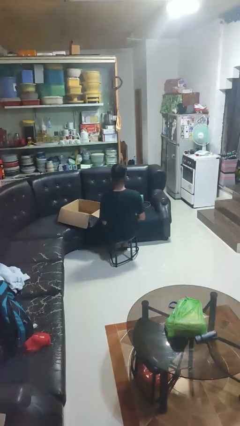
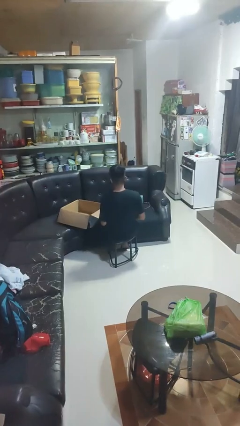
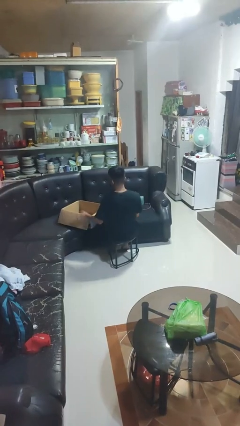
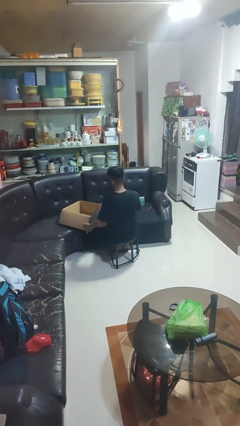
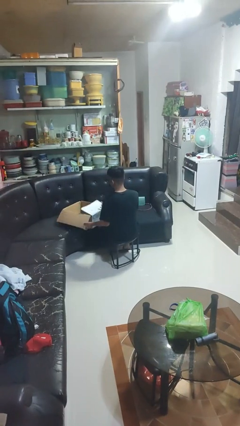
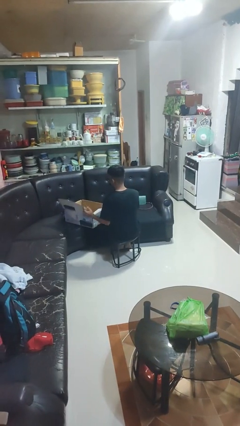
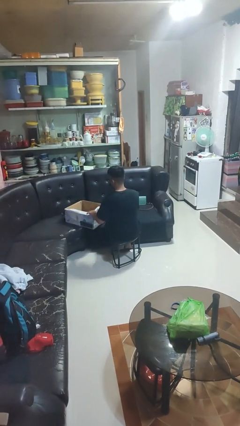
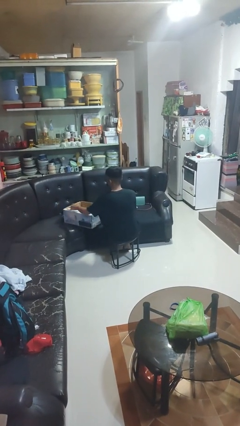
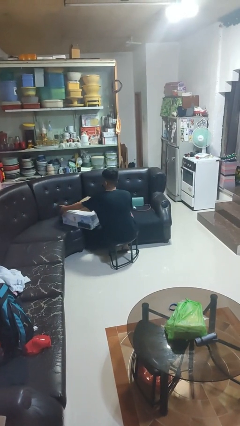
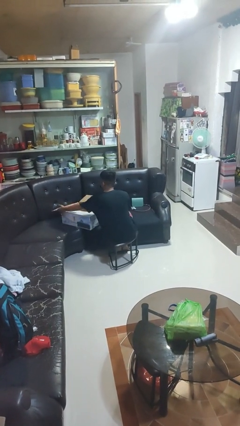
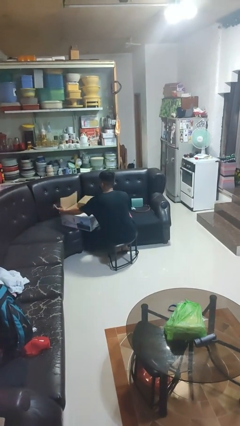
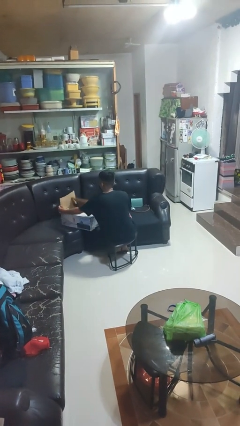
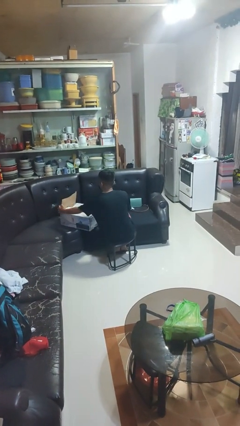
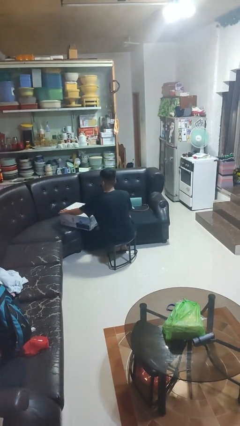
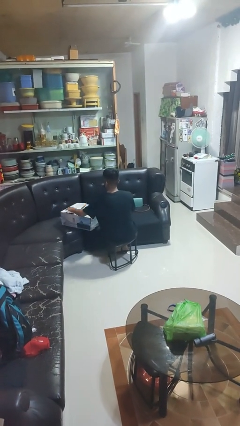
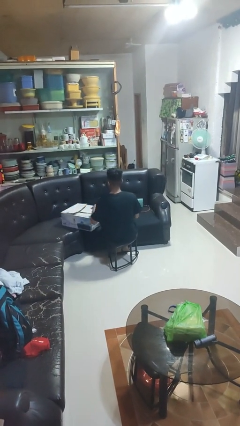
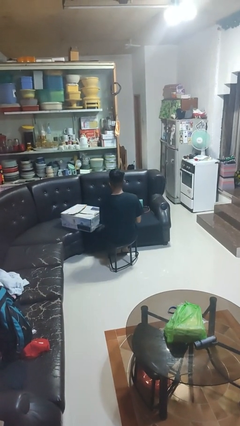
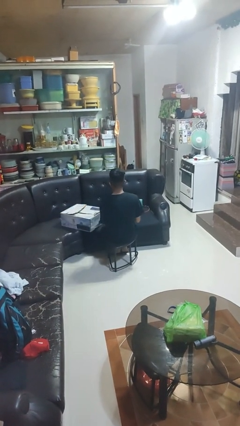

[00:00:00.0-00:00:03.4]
person closes box

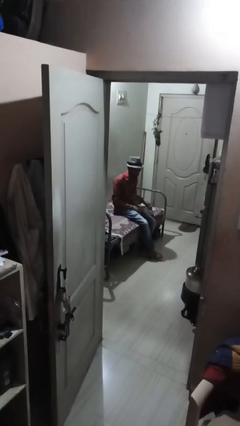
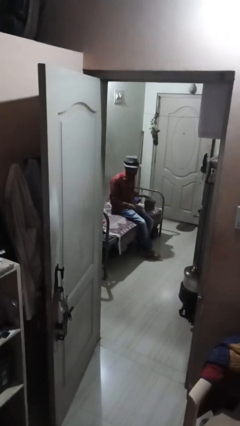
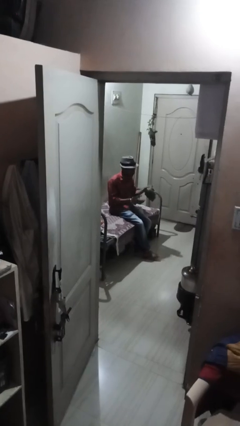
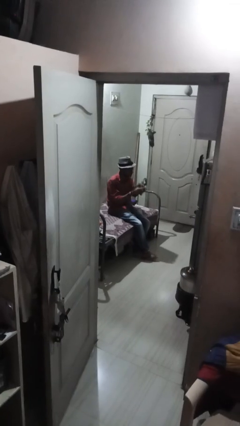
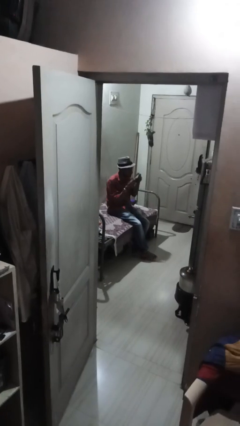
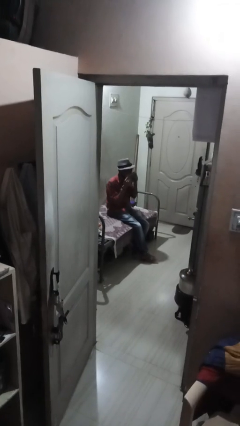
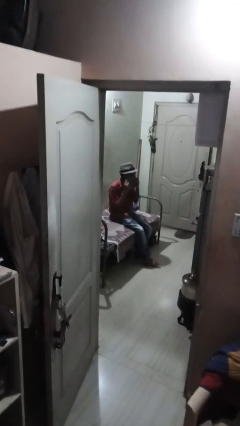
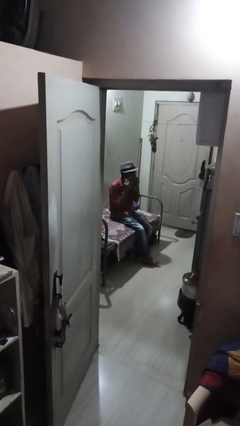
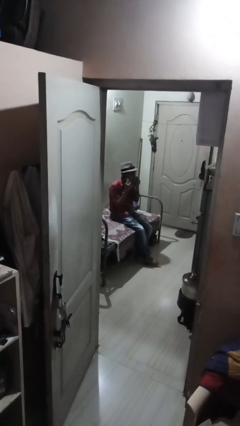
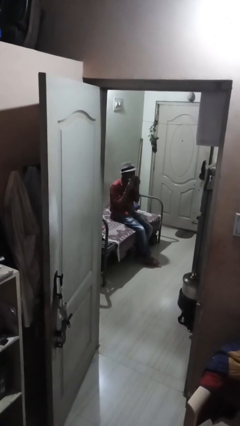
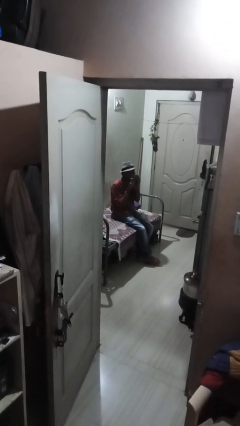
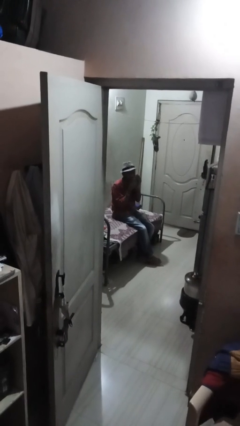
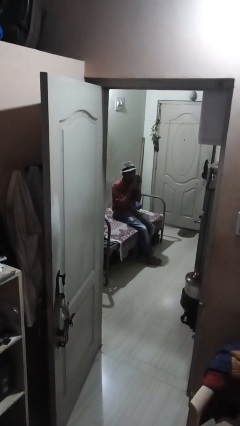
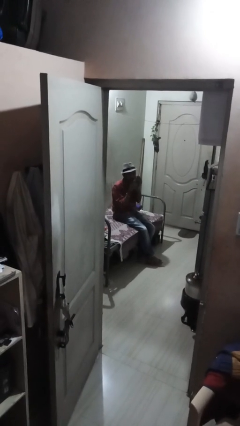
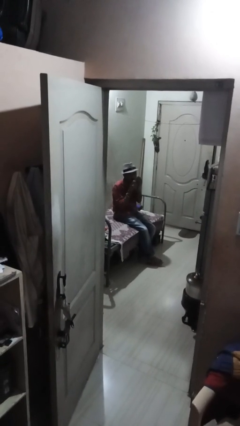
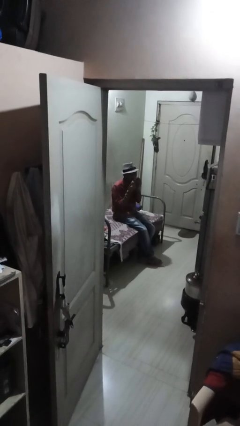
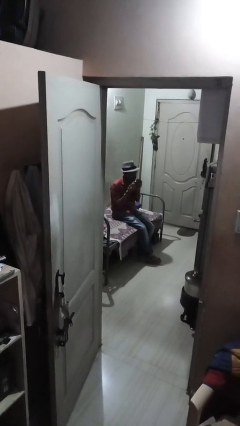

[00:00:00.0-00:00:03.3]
person wipes mouth with napkin

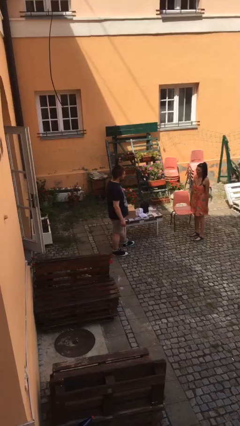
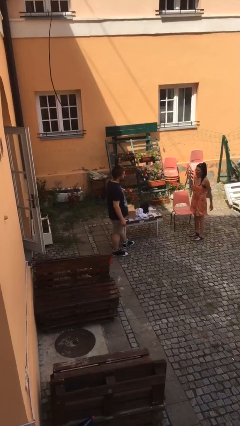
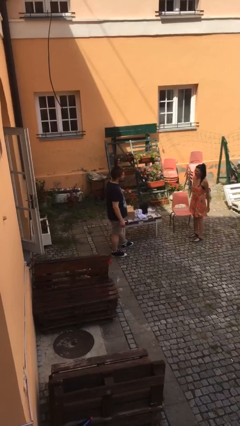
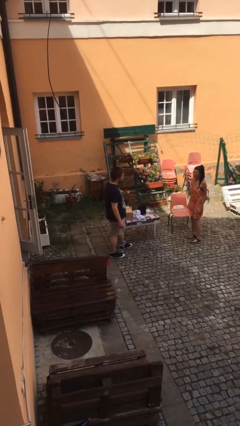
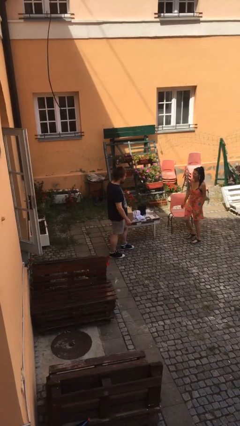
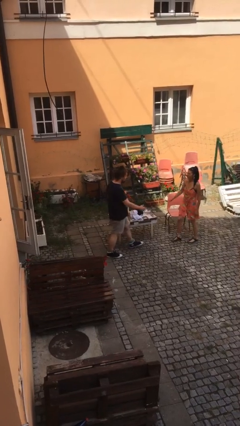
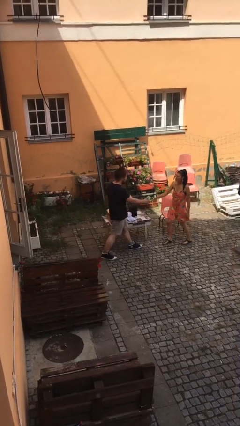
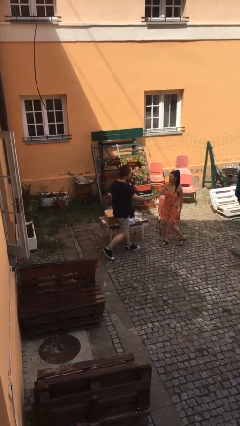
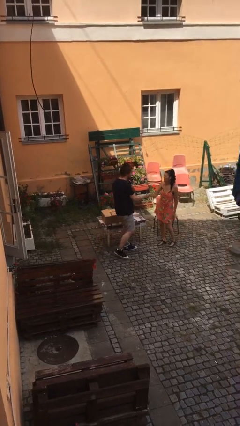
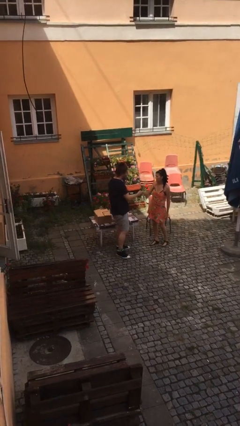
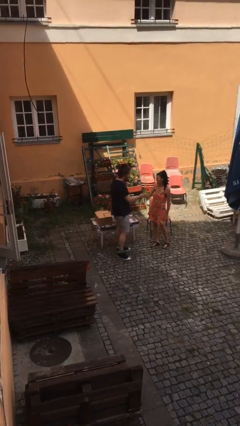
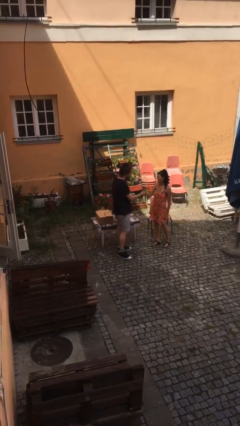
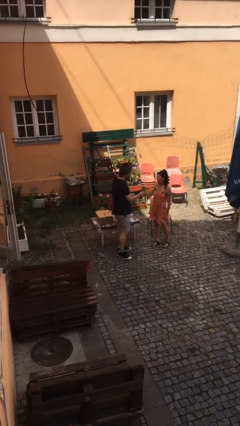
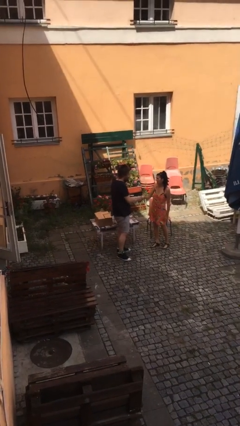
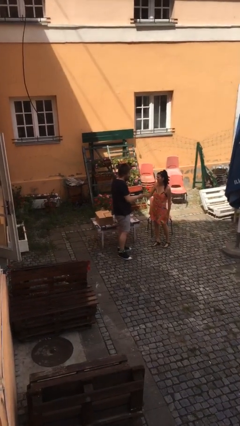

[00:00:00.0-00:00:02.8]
person shakes hand

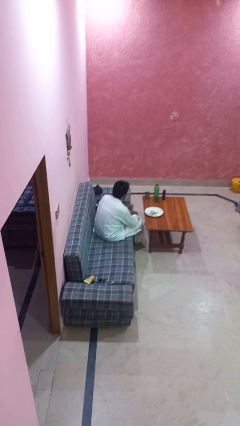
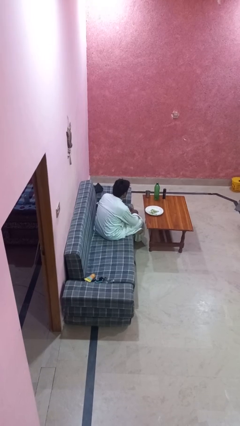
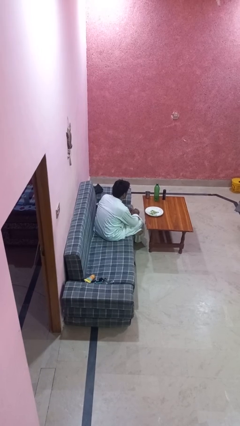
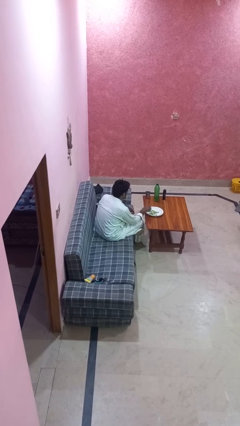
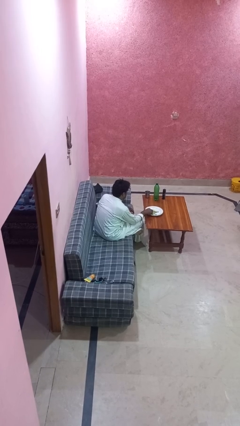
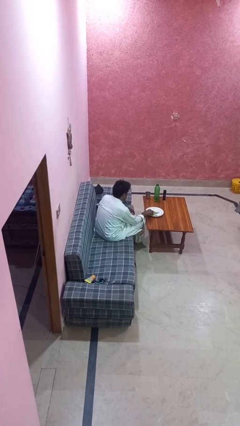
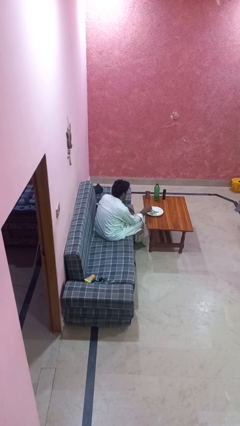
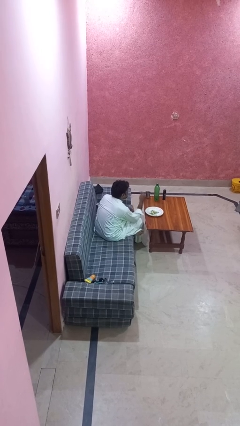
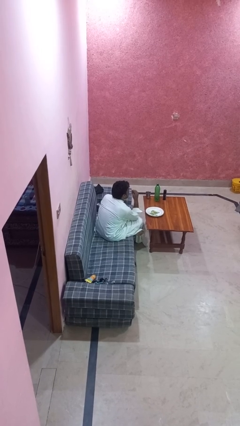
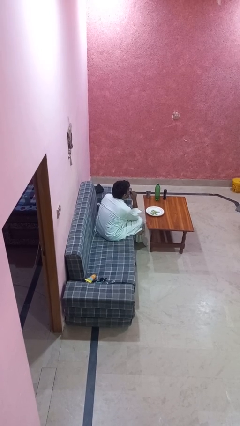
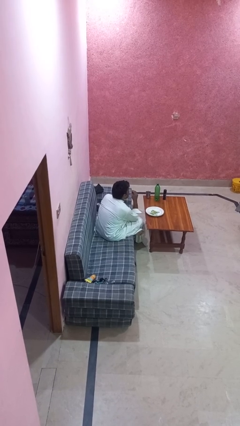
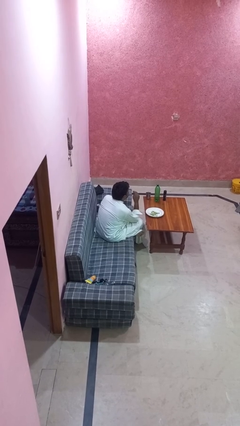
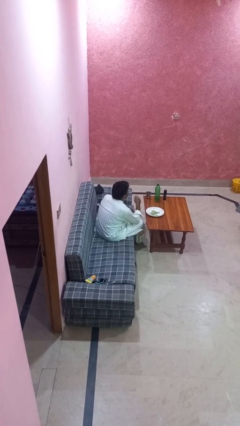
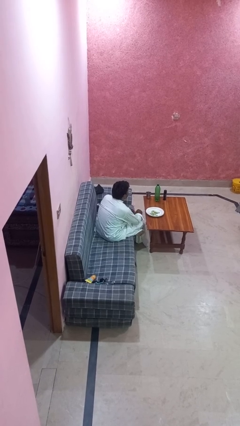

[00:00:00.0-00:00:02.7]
person eats with hands

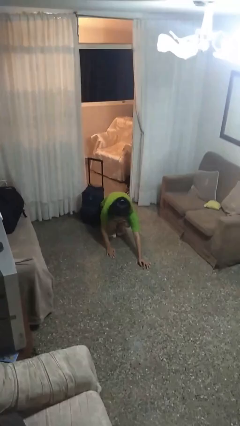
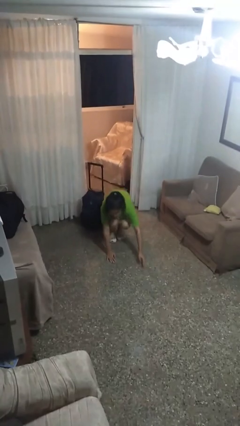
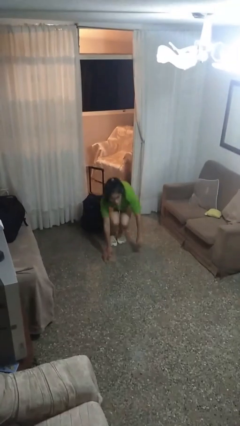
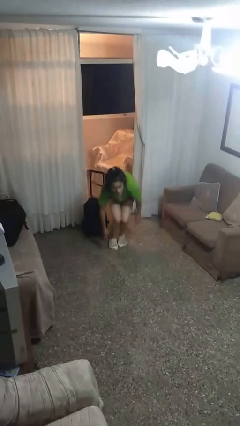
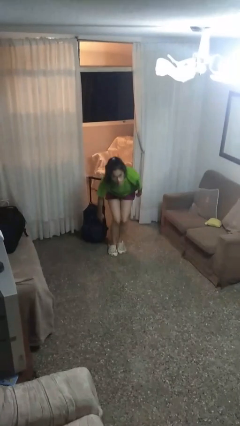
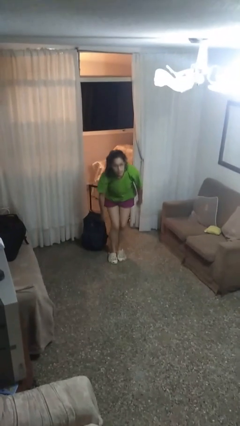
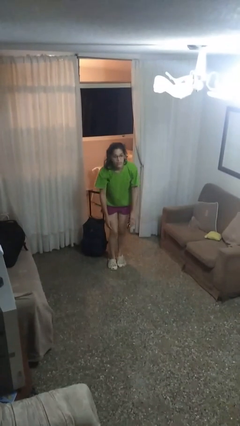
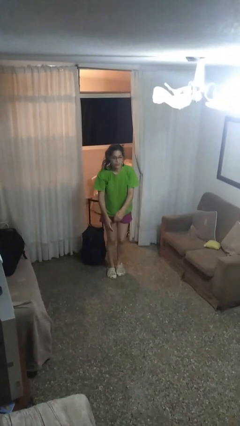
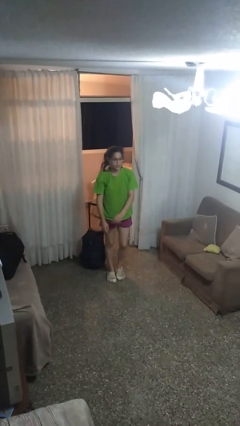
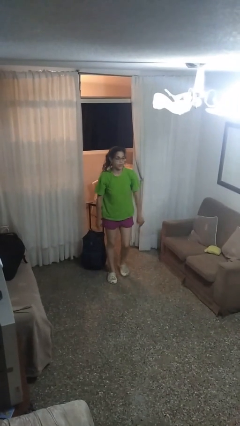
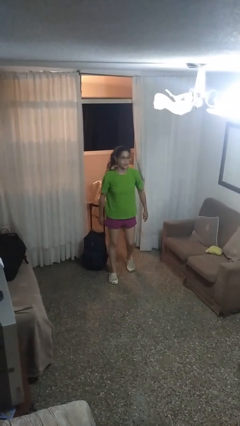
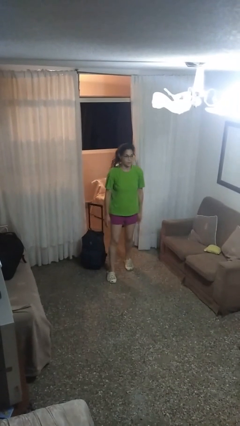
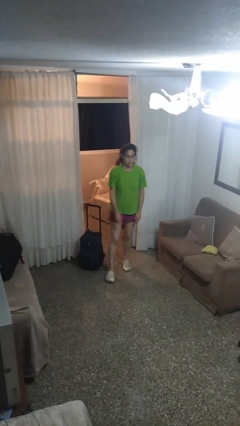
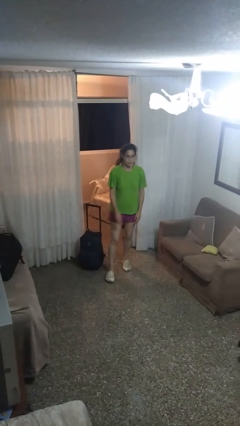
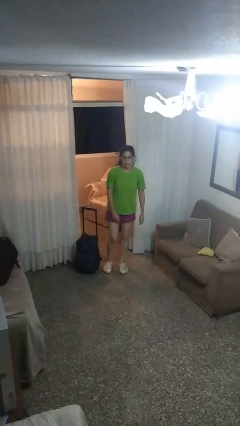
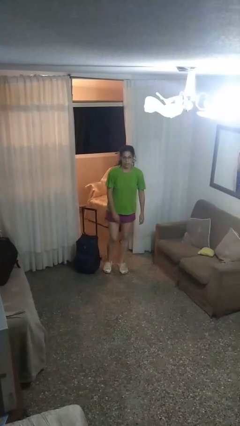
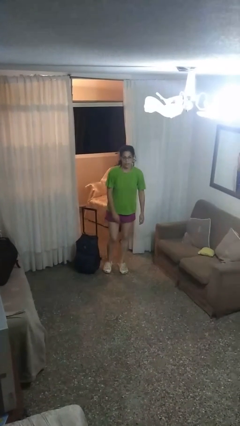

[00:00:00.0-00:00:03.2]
person stands up from floor

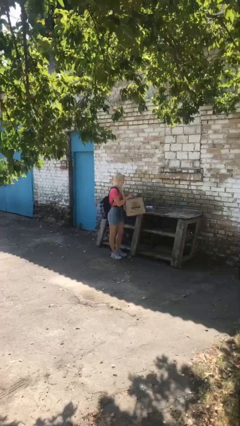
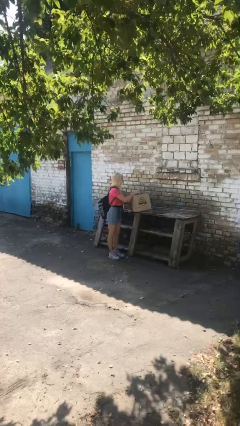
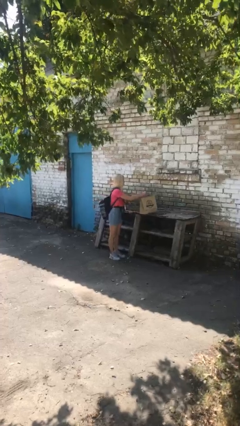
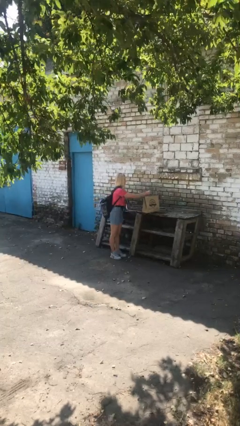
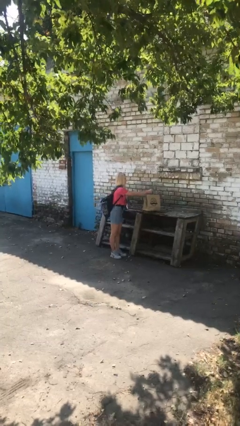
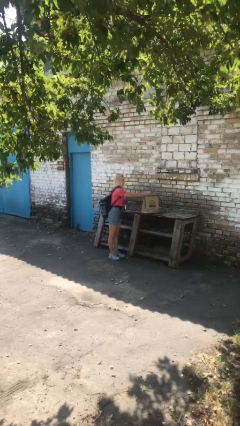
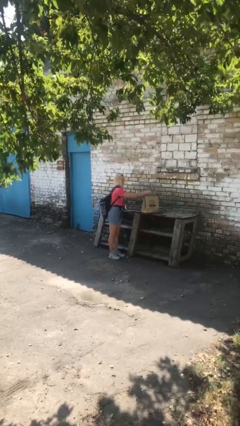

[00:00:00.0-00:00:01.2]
person puts down object on table

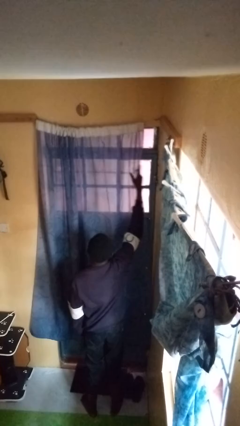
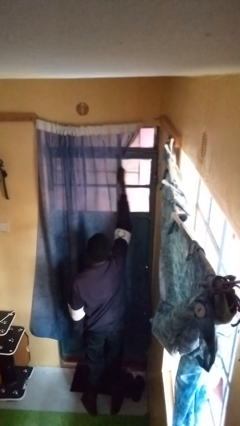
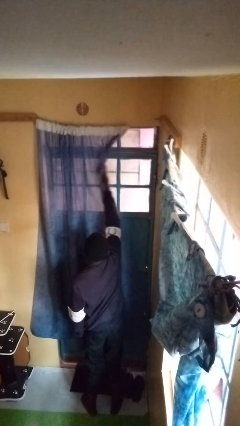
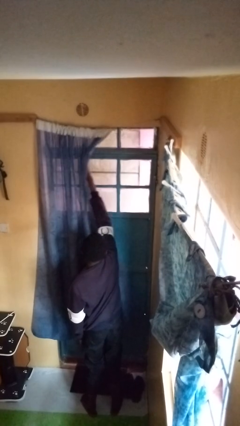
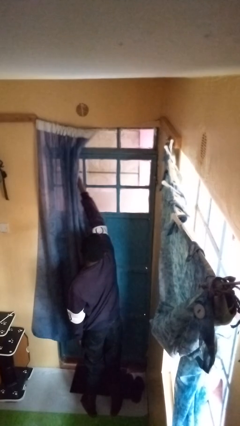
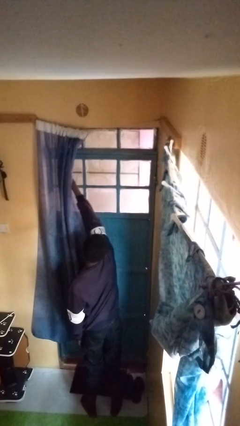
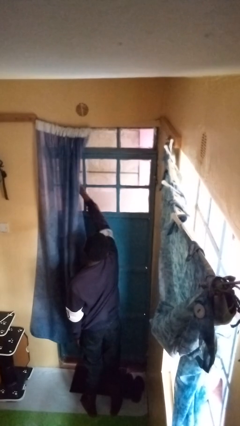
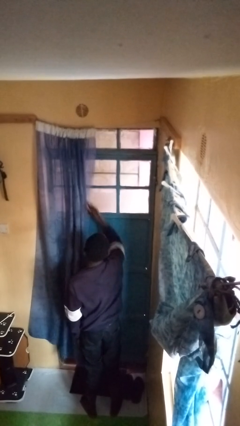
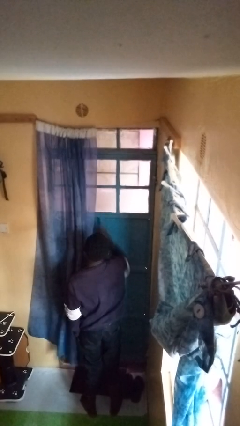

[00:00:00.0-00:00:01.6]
person opens curtains
